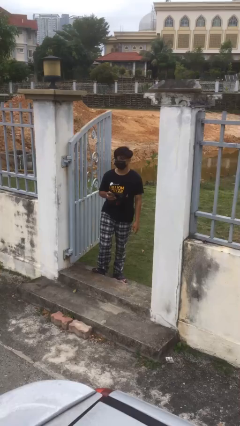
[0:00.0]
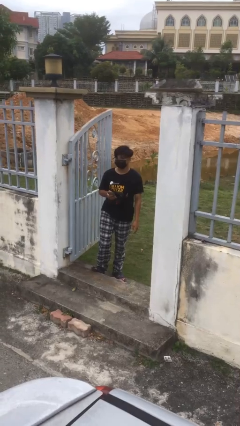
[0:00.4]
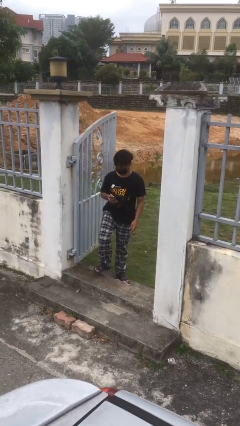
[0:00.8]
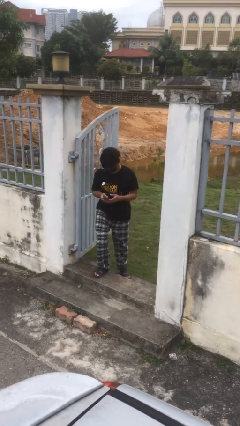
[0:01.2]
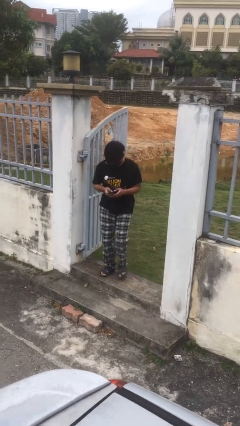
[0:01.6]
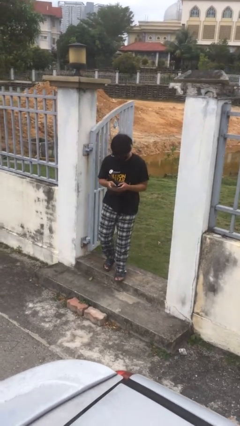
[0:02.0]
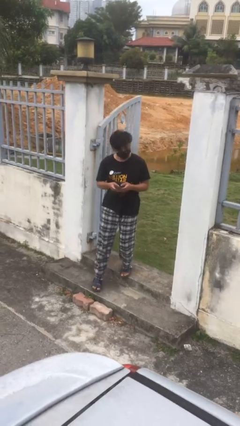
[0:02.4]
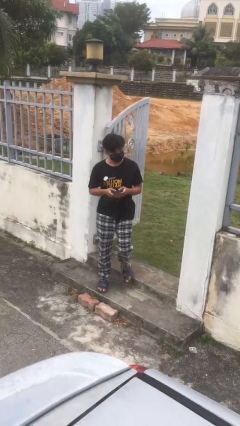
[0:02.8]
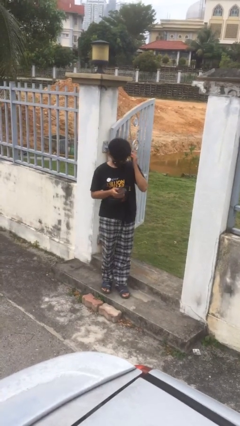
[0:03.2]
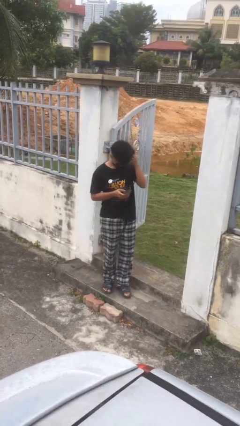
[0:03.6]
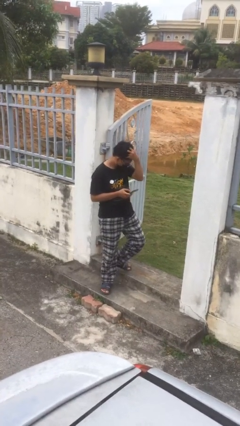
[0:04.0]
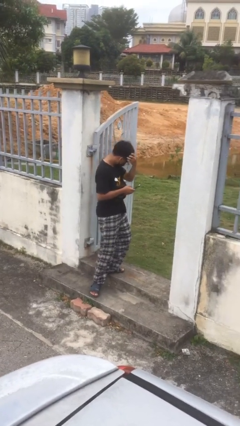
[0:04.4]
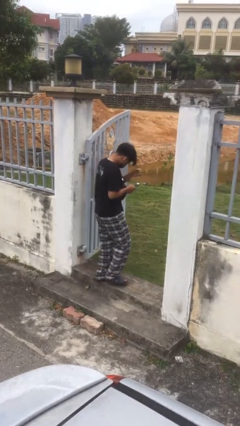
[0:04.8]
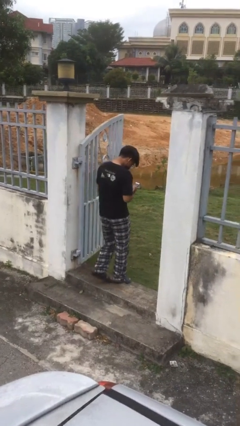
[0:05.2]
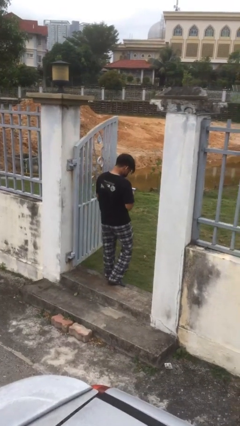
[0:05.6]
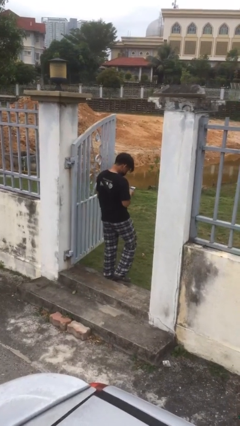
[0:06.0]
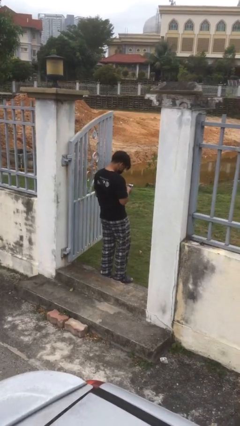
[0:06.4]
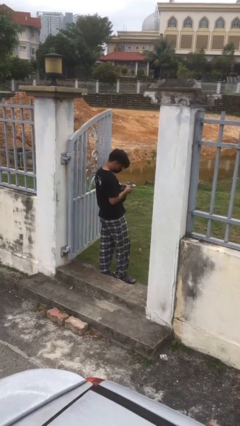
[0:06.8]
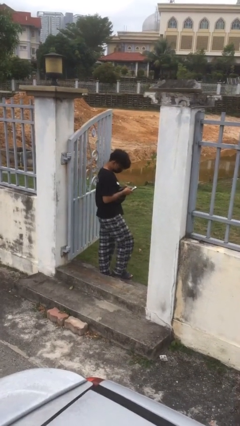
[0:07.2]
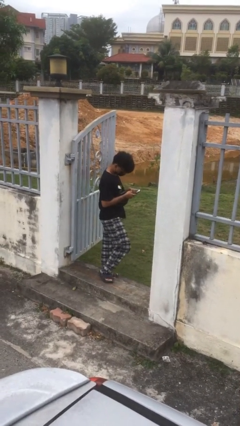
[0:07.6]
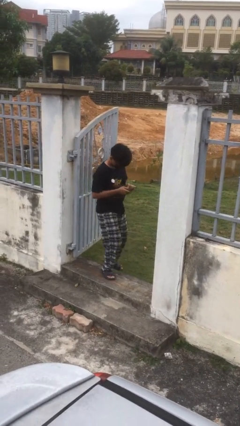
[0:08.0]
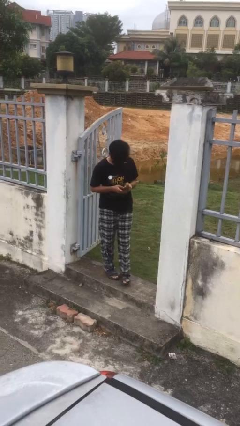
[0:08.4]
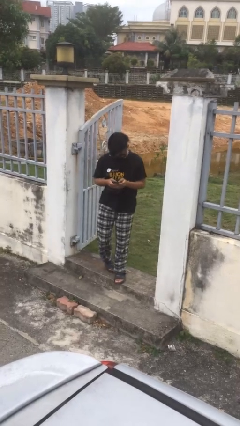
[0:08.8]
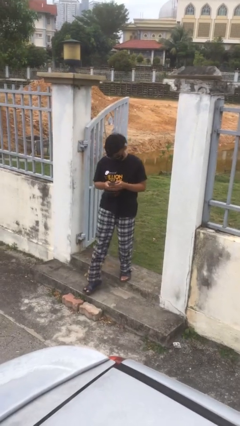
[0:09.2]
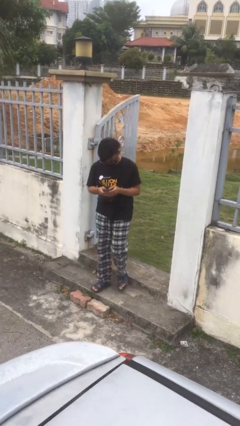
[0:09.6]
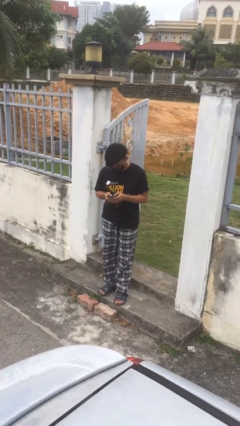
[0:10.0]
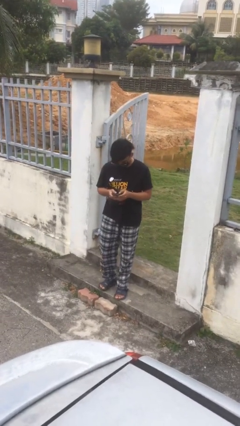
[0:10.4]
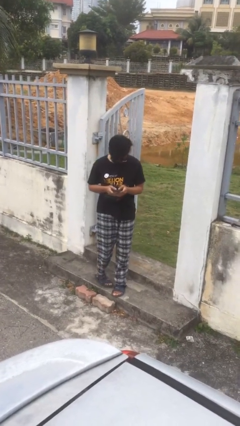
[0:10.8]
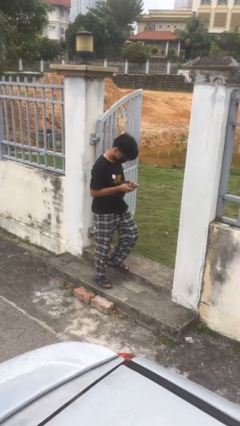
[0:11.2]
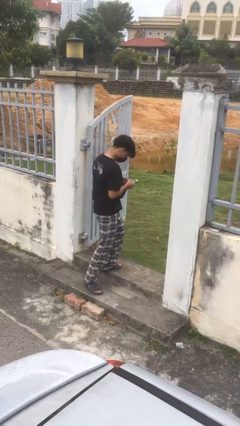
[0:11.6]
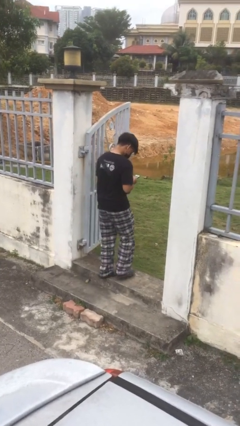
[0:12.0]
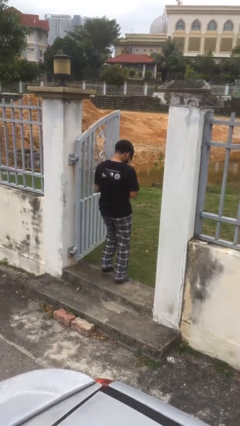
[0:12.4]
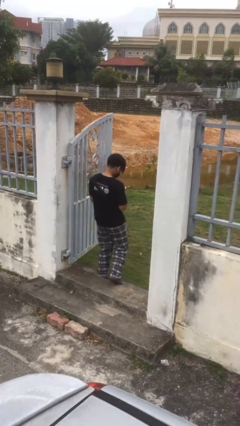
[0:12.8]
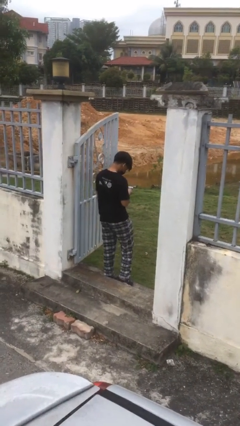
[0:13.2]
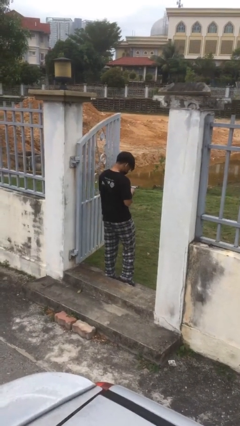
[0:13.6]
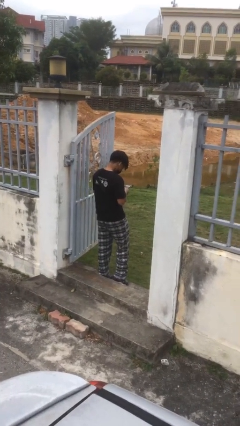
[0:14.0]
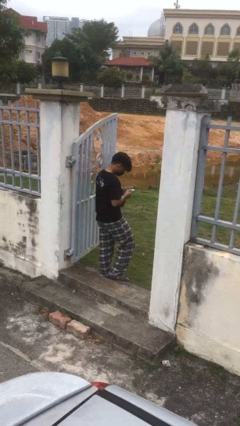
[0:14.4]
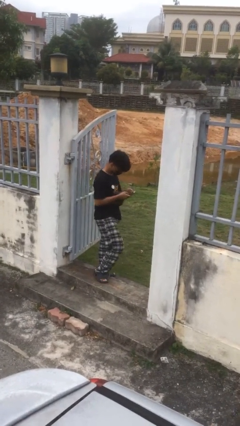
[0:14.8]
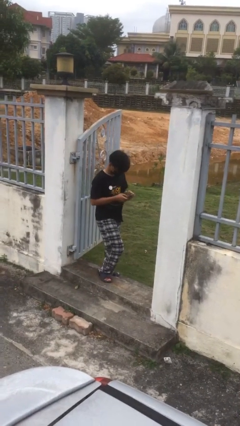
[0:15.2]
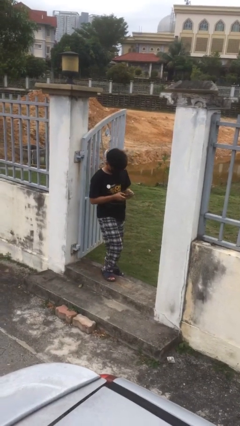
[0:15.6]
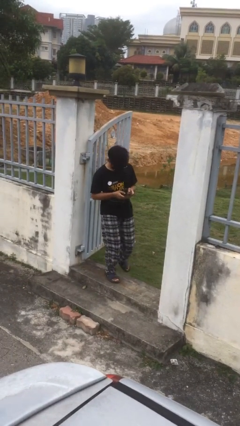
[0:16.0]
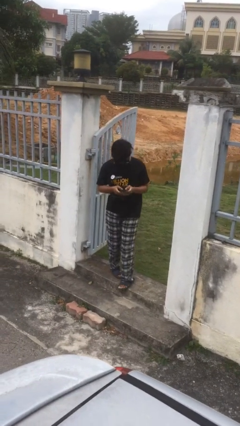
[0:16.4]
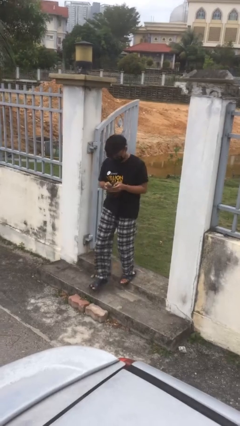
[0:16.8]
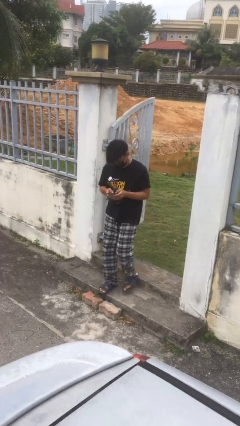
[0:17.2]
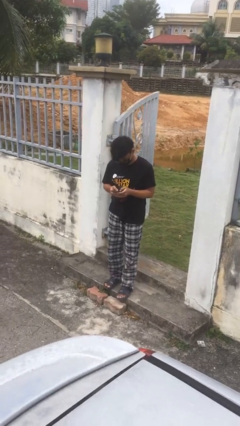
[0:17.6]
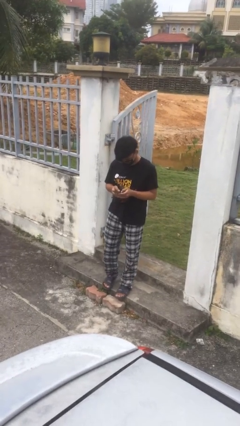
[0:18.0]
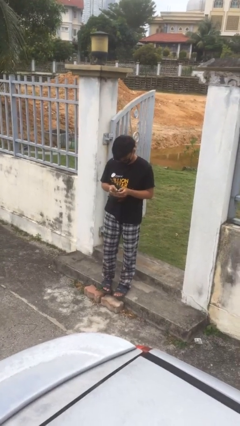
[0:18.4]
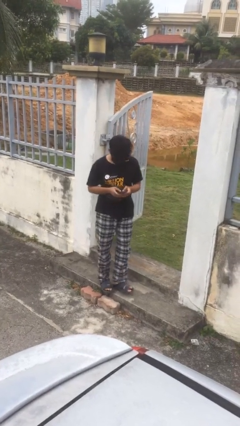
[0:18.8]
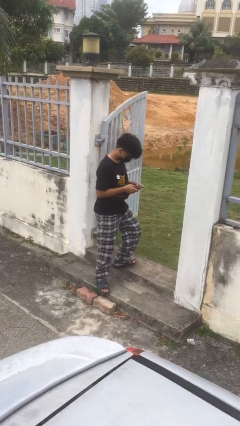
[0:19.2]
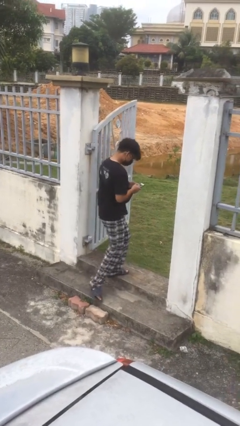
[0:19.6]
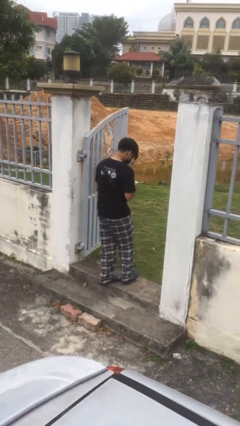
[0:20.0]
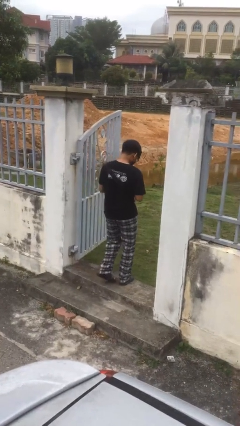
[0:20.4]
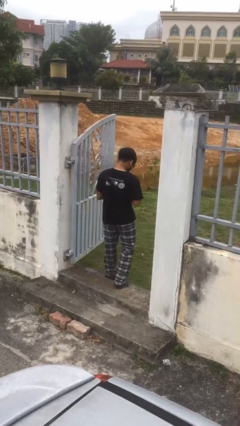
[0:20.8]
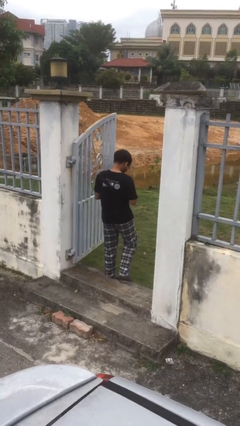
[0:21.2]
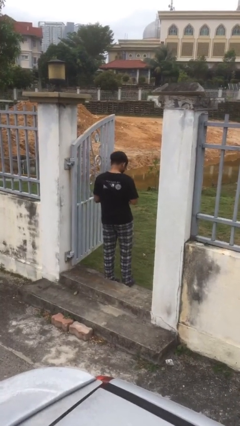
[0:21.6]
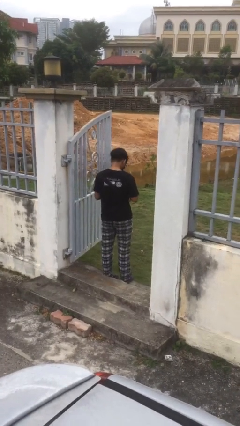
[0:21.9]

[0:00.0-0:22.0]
person texts on phone

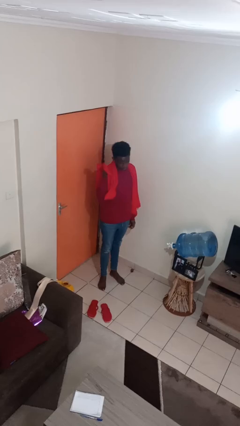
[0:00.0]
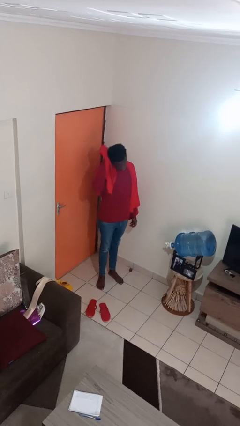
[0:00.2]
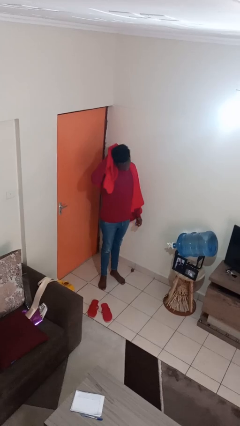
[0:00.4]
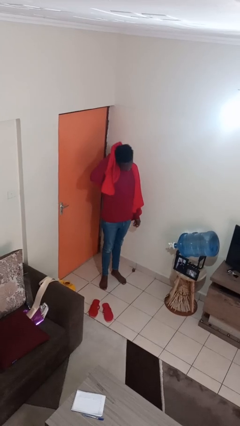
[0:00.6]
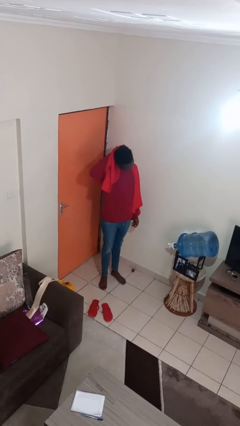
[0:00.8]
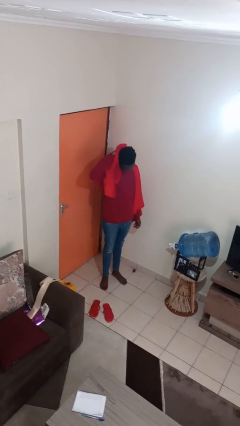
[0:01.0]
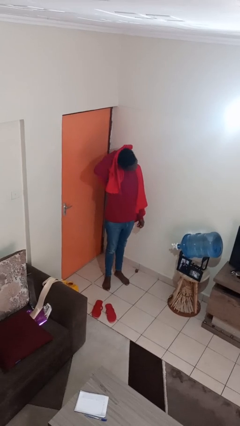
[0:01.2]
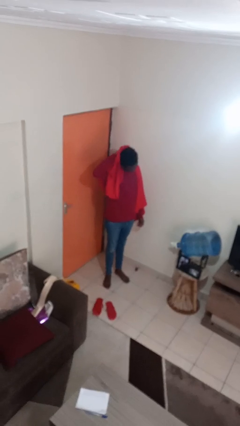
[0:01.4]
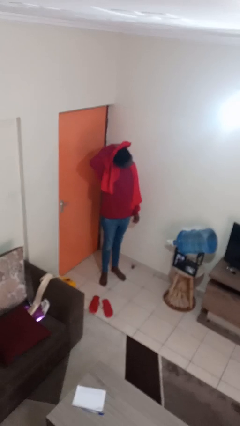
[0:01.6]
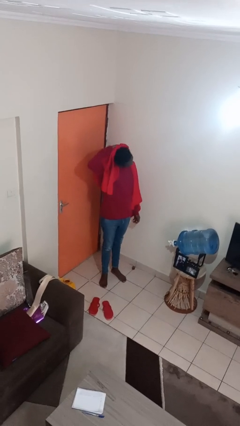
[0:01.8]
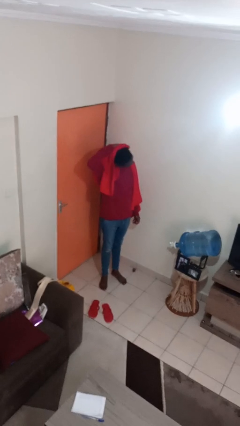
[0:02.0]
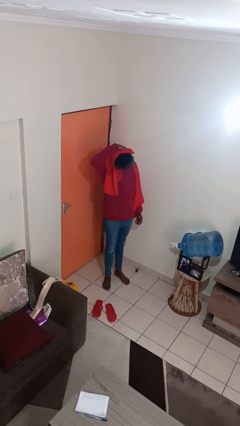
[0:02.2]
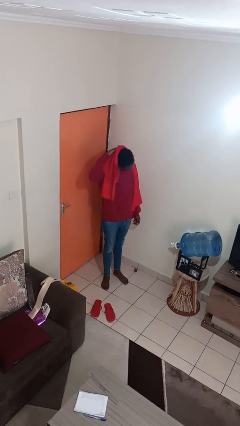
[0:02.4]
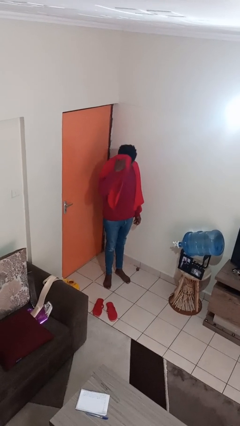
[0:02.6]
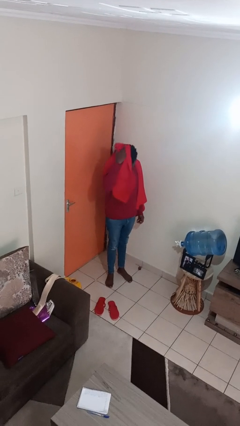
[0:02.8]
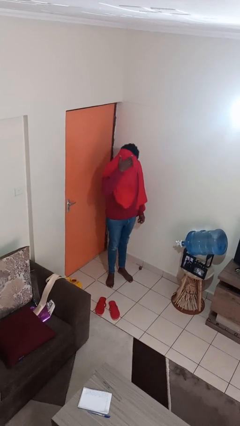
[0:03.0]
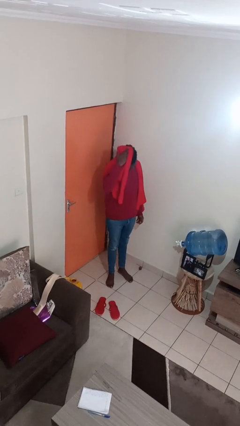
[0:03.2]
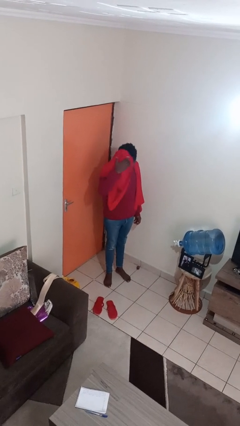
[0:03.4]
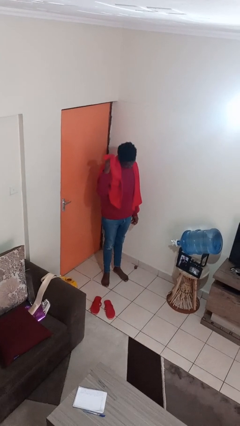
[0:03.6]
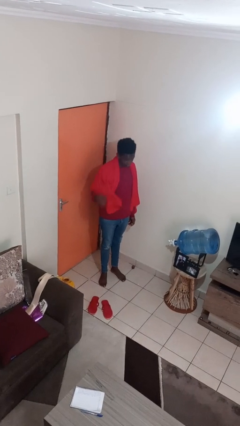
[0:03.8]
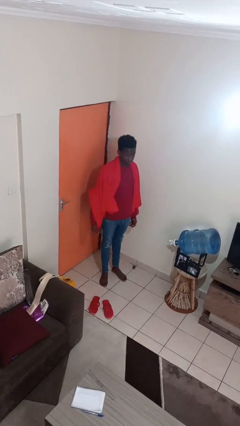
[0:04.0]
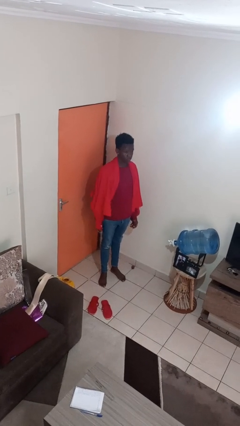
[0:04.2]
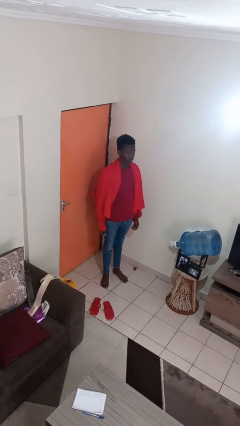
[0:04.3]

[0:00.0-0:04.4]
person dries hair with towel

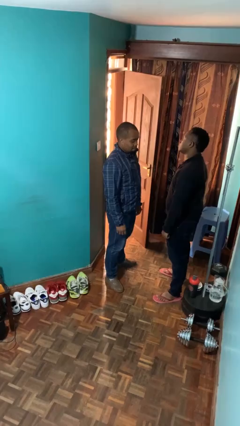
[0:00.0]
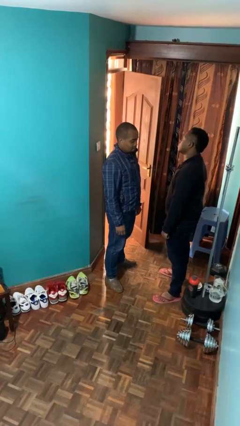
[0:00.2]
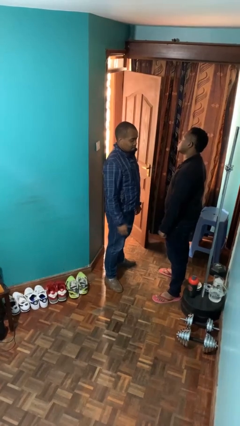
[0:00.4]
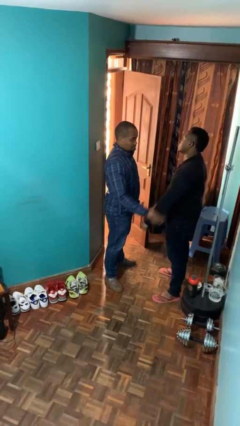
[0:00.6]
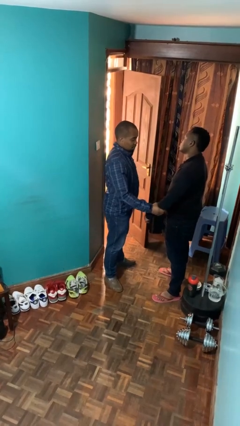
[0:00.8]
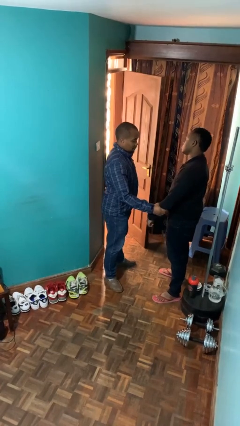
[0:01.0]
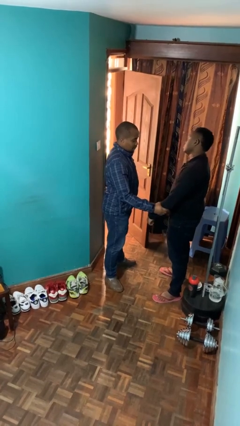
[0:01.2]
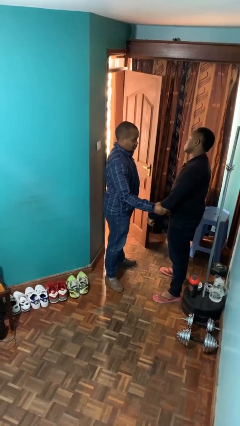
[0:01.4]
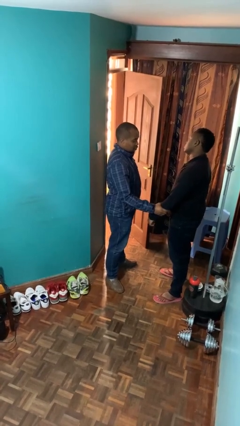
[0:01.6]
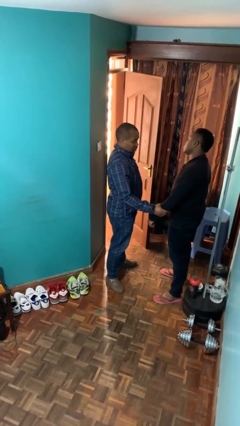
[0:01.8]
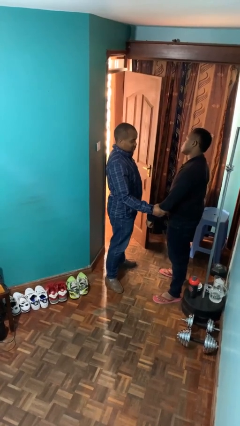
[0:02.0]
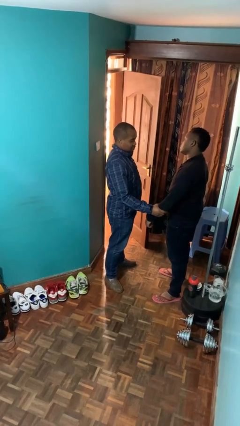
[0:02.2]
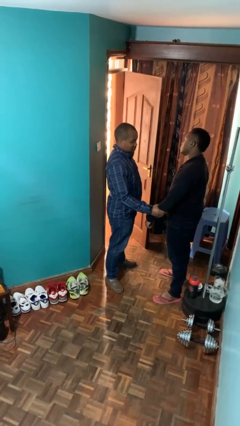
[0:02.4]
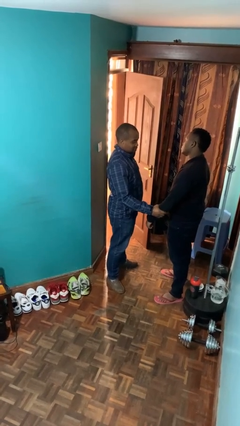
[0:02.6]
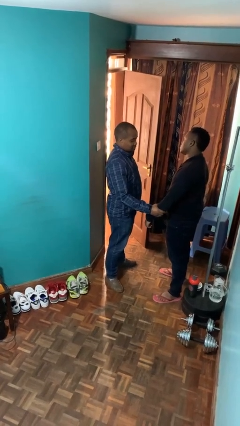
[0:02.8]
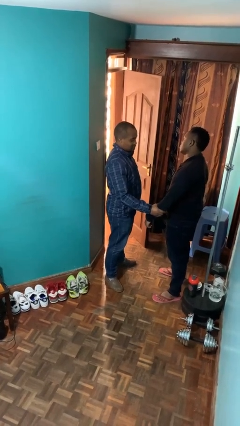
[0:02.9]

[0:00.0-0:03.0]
person grabs person by forearm
